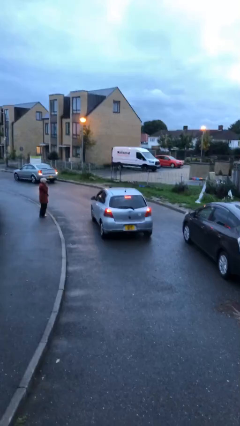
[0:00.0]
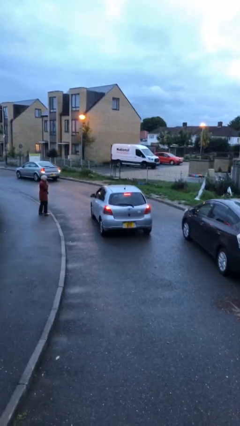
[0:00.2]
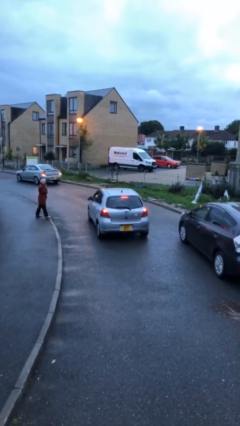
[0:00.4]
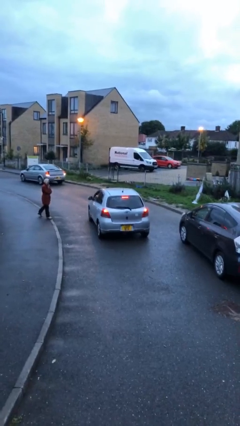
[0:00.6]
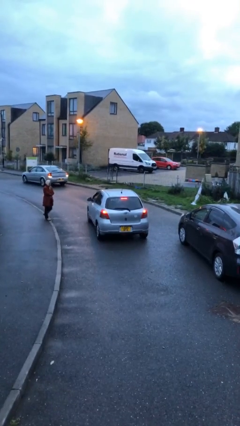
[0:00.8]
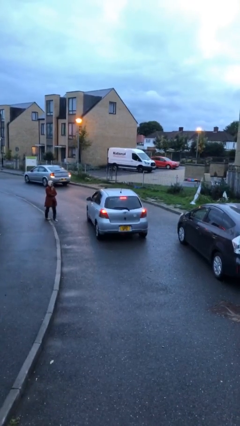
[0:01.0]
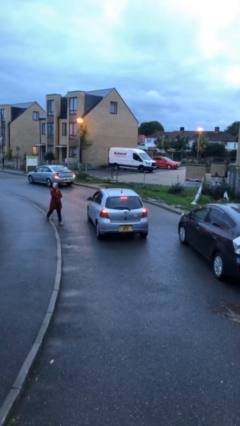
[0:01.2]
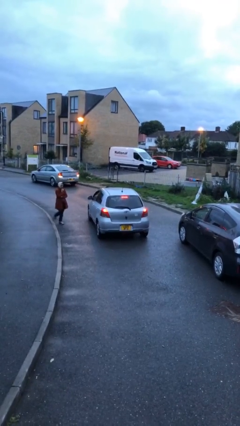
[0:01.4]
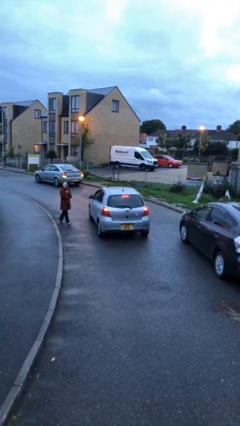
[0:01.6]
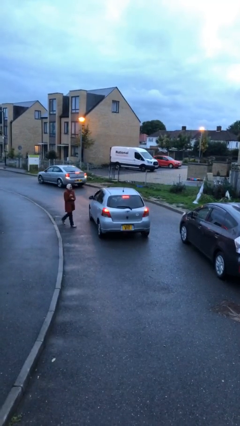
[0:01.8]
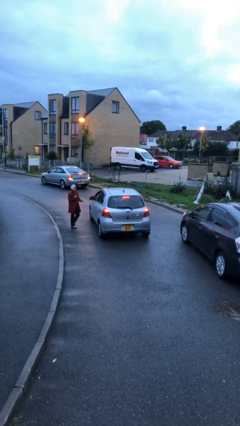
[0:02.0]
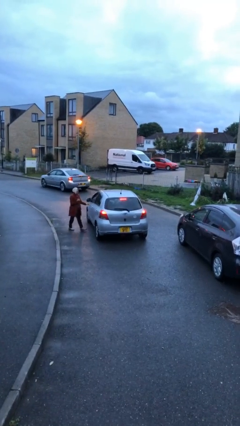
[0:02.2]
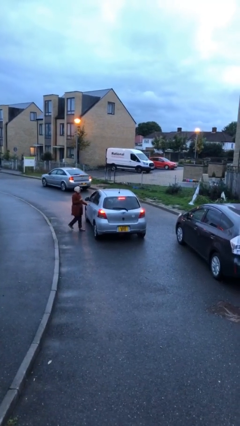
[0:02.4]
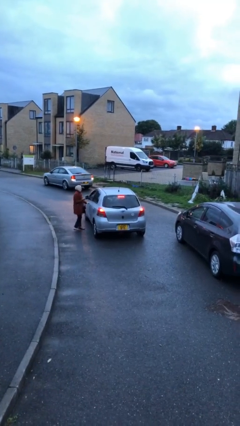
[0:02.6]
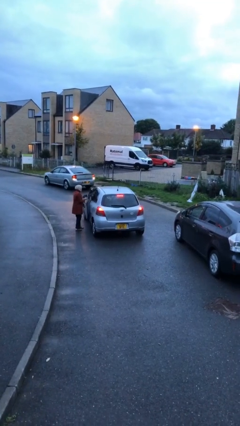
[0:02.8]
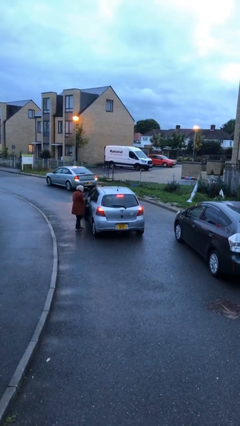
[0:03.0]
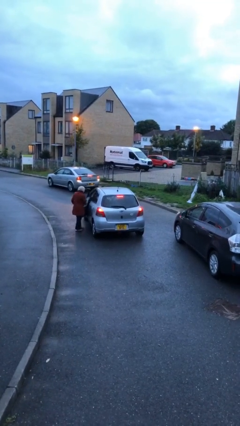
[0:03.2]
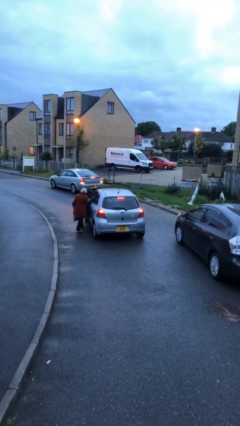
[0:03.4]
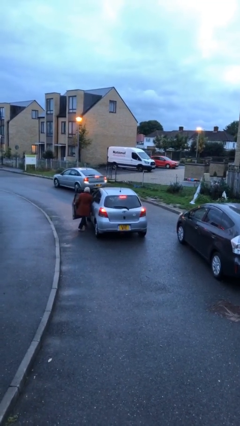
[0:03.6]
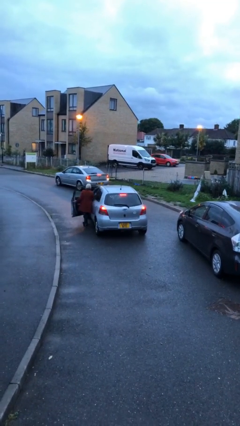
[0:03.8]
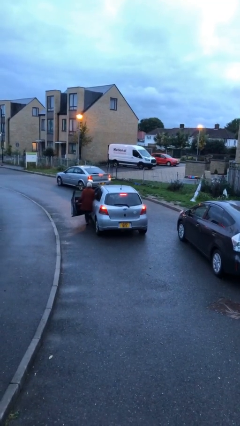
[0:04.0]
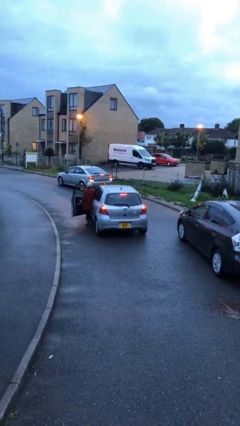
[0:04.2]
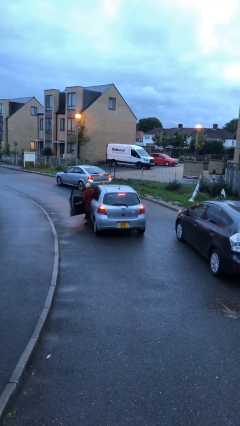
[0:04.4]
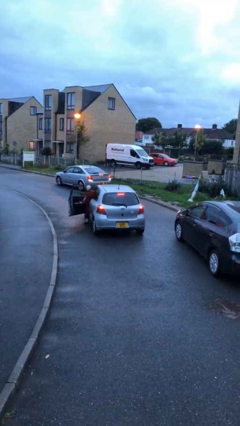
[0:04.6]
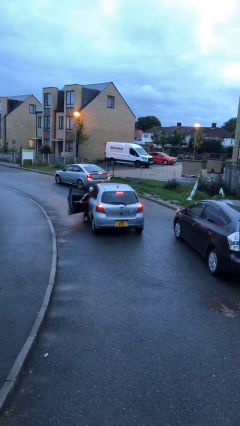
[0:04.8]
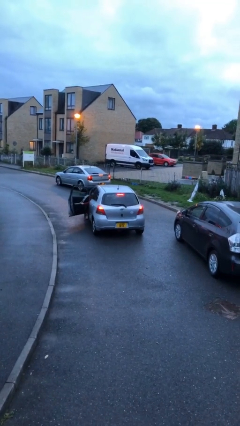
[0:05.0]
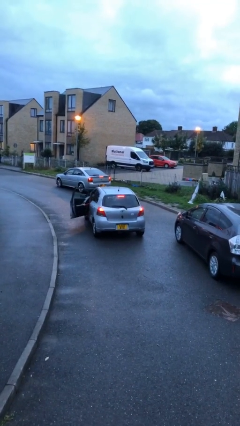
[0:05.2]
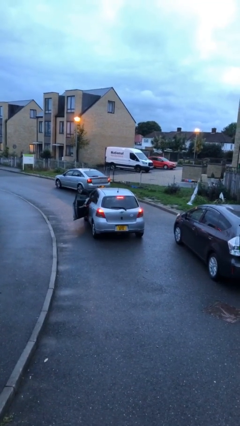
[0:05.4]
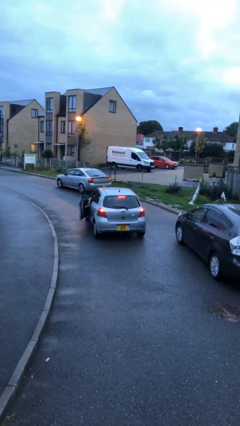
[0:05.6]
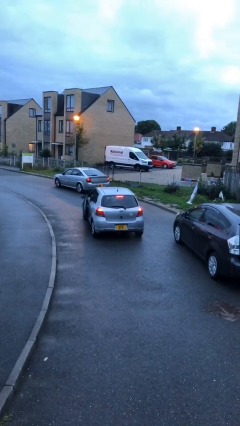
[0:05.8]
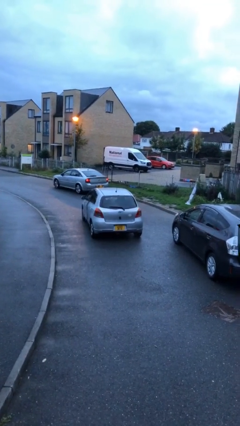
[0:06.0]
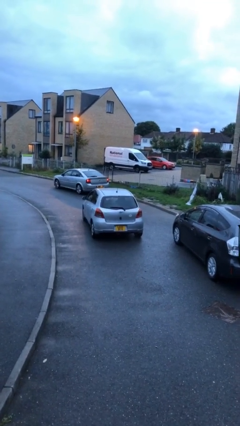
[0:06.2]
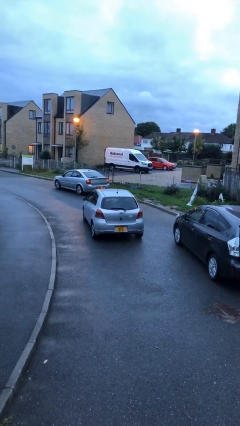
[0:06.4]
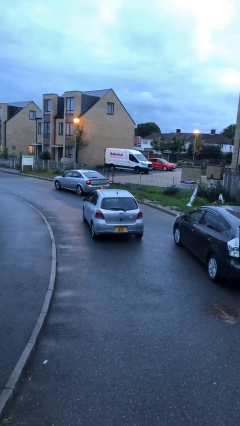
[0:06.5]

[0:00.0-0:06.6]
car picks up person

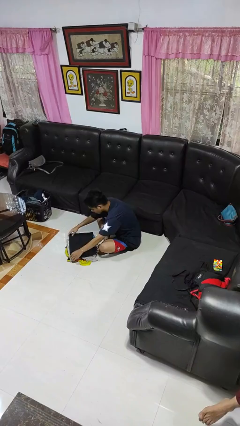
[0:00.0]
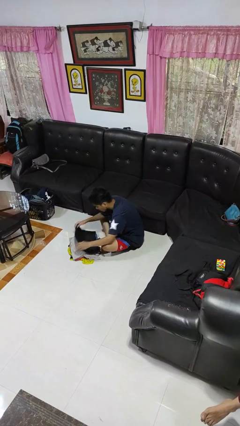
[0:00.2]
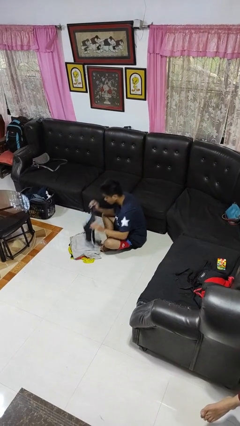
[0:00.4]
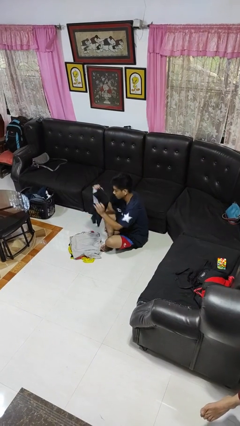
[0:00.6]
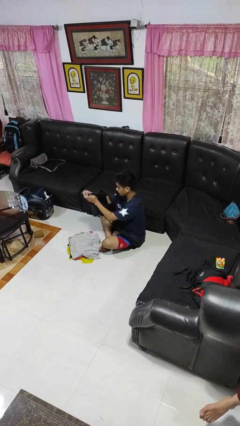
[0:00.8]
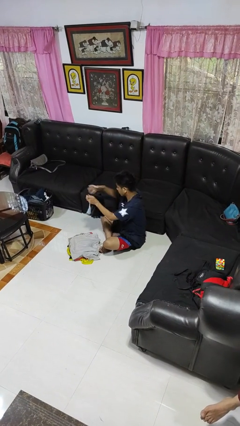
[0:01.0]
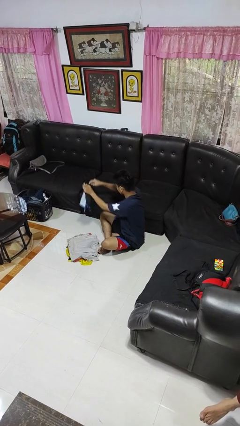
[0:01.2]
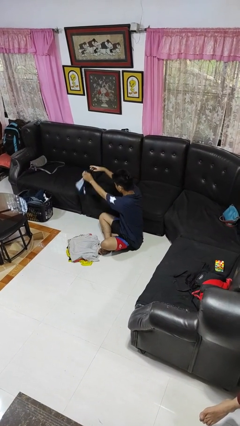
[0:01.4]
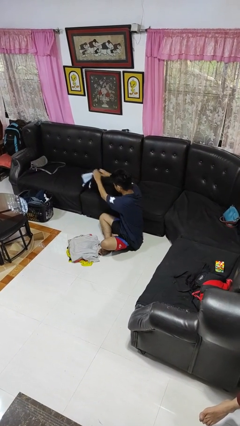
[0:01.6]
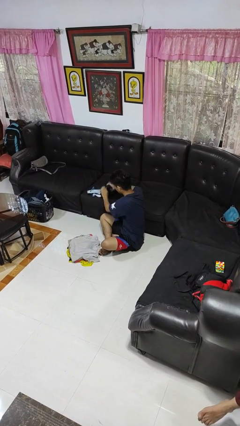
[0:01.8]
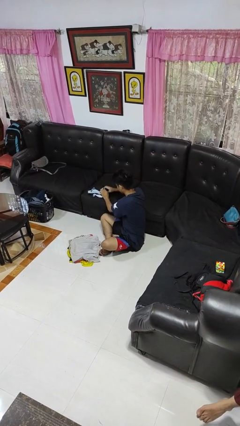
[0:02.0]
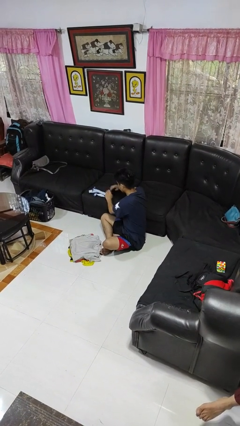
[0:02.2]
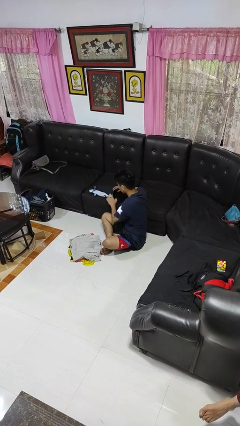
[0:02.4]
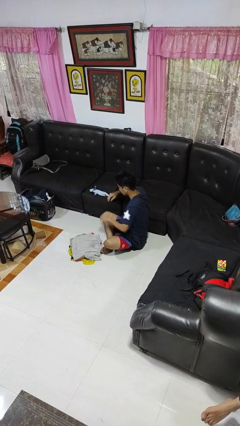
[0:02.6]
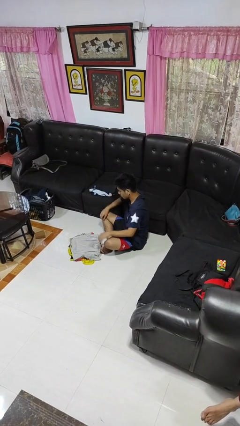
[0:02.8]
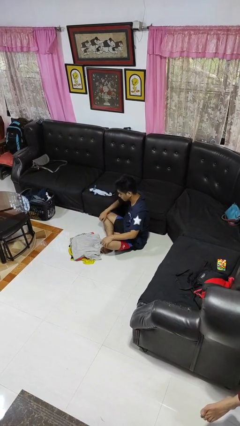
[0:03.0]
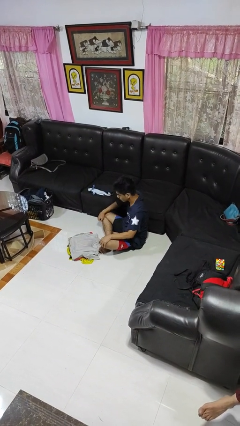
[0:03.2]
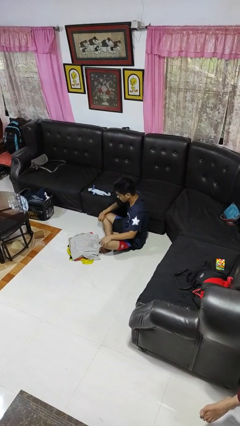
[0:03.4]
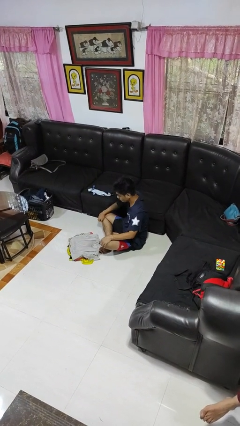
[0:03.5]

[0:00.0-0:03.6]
person folds shirt

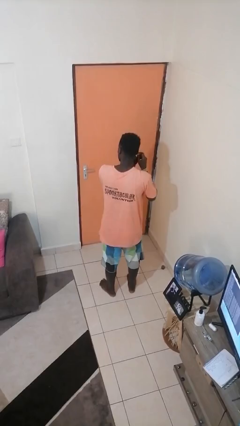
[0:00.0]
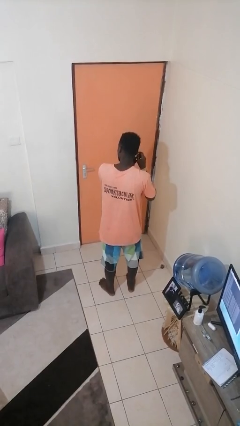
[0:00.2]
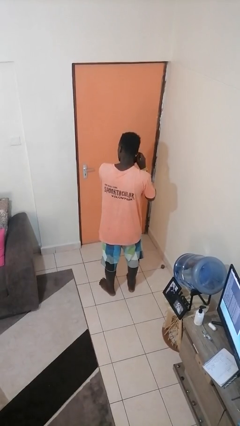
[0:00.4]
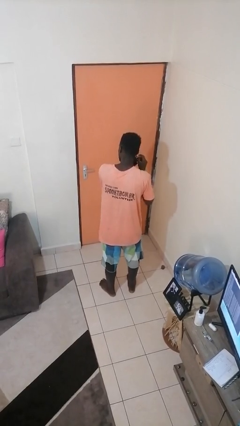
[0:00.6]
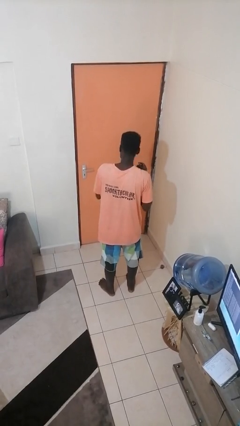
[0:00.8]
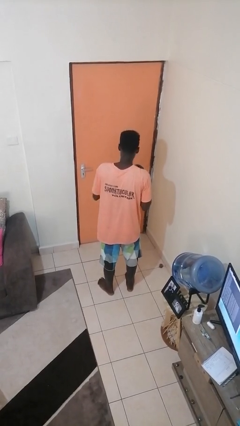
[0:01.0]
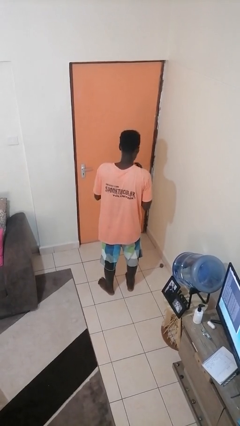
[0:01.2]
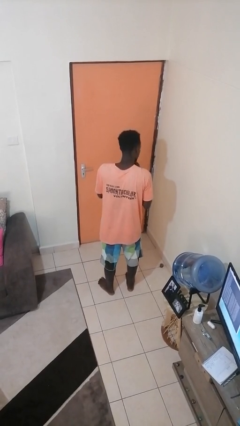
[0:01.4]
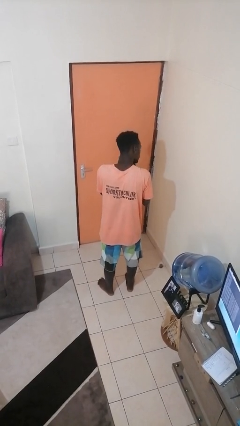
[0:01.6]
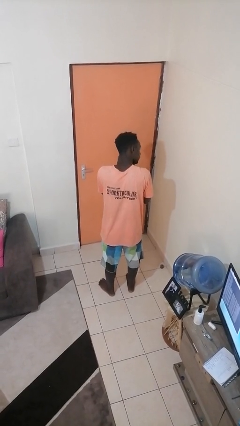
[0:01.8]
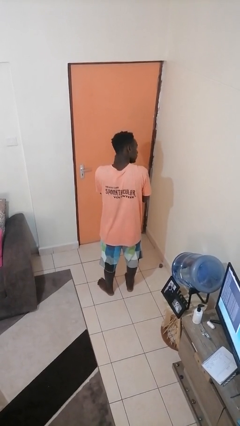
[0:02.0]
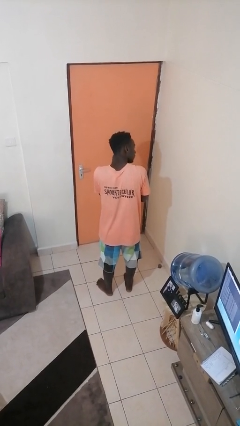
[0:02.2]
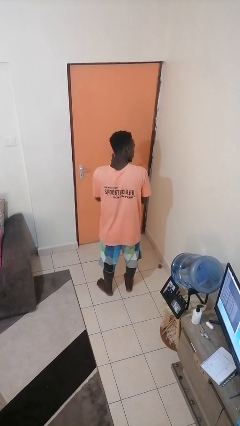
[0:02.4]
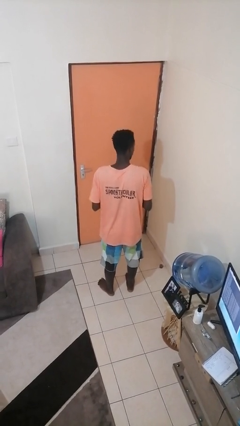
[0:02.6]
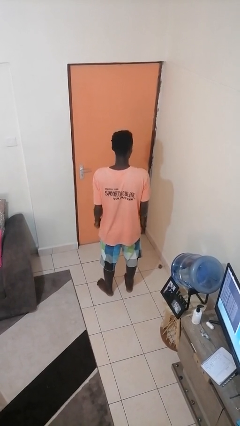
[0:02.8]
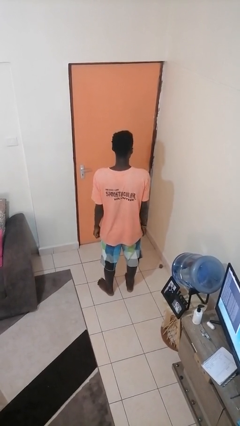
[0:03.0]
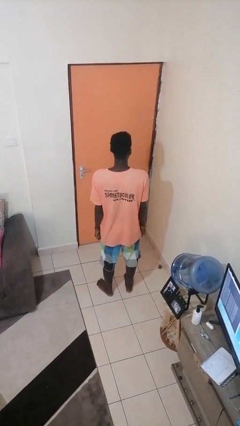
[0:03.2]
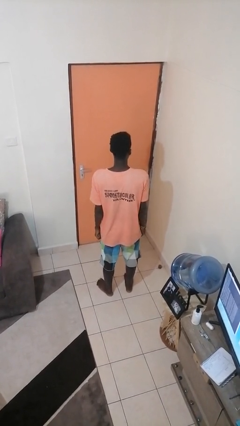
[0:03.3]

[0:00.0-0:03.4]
person puts on earrings

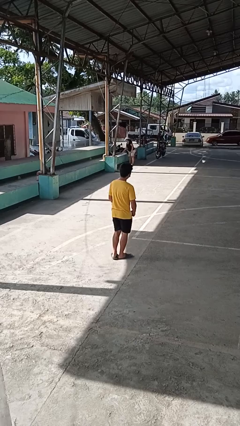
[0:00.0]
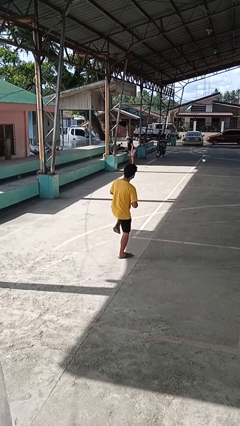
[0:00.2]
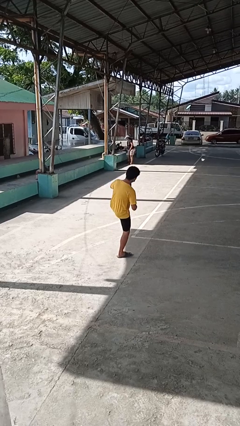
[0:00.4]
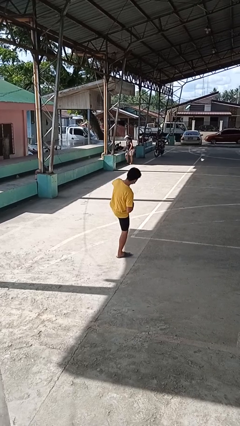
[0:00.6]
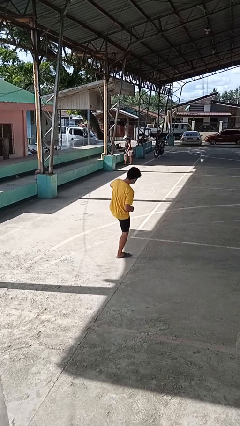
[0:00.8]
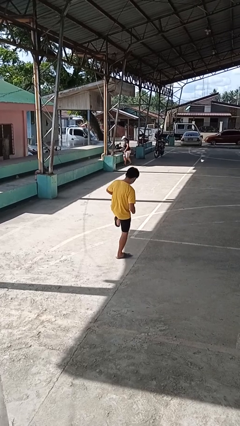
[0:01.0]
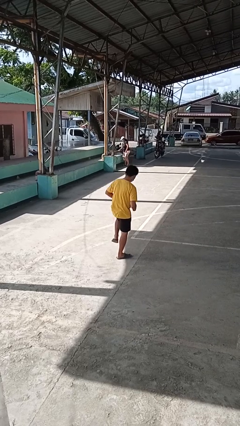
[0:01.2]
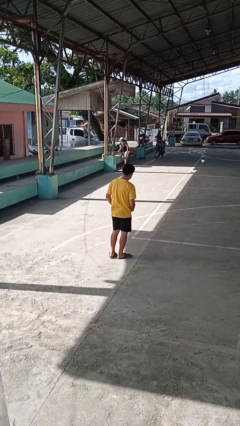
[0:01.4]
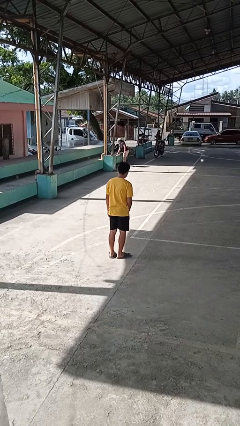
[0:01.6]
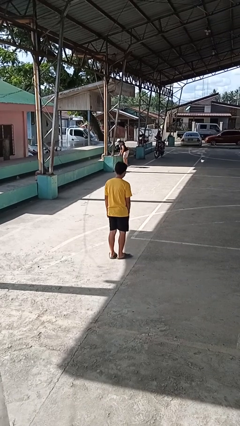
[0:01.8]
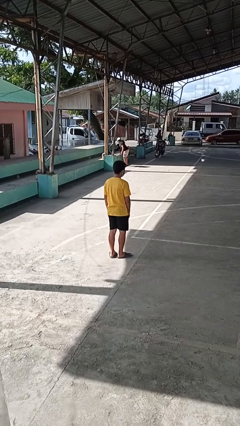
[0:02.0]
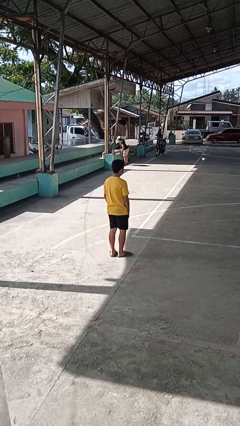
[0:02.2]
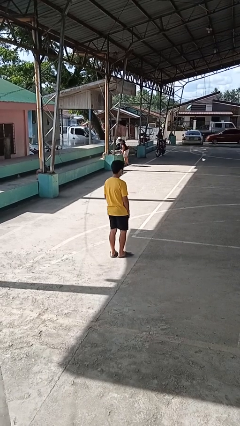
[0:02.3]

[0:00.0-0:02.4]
person karate kicks

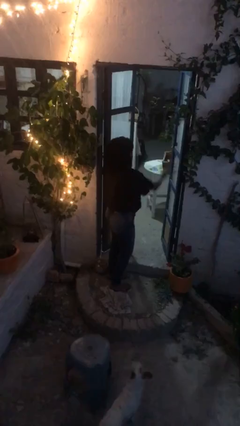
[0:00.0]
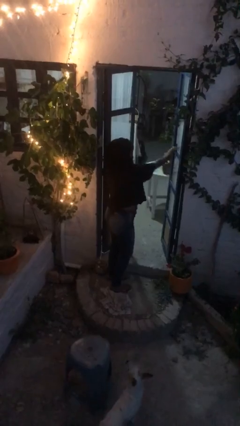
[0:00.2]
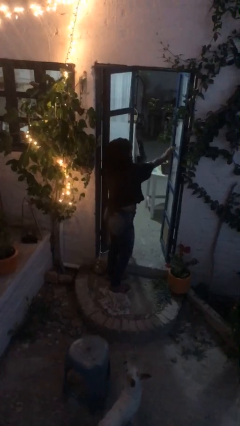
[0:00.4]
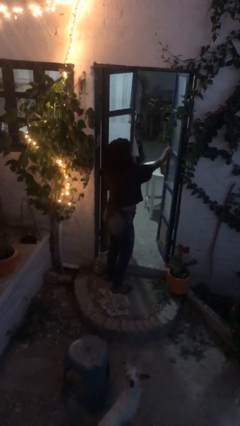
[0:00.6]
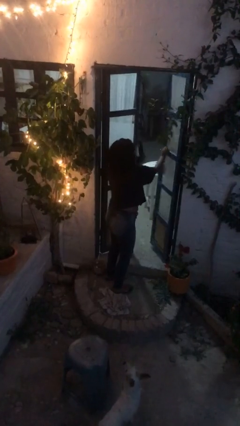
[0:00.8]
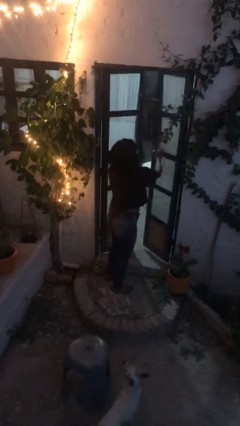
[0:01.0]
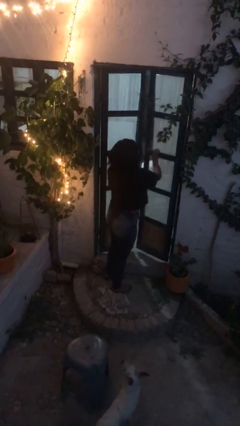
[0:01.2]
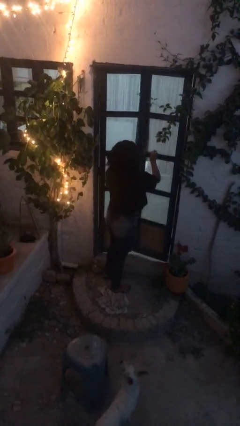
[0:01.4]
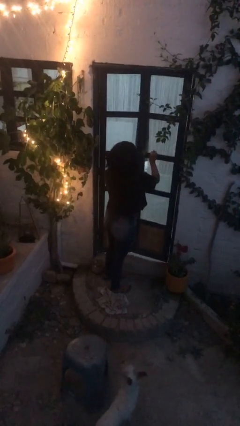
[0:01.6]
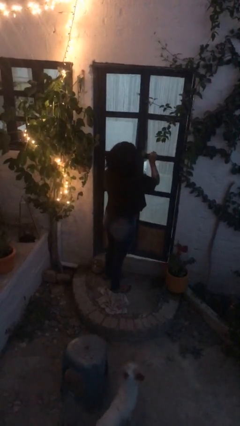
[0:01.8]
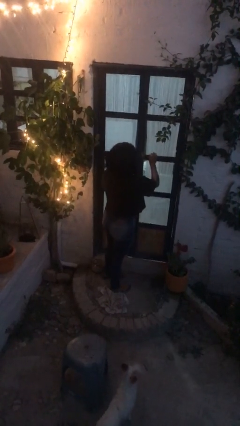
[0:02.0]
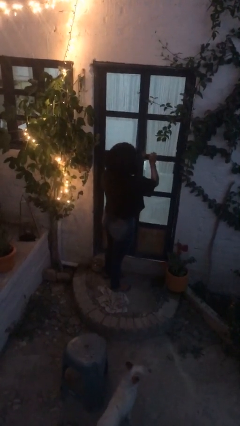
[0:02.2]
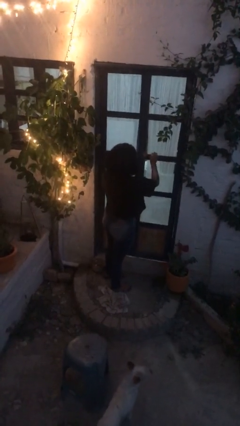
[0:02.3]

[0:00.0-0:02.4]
person closes facility door
